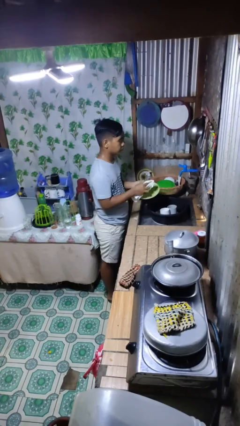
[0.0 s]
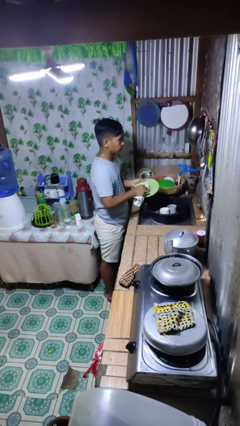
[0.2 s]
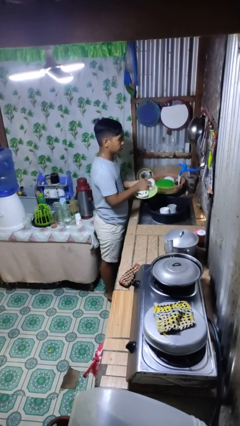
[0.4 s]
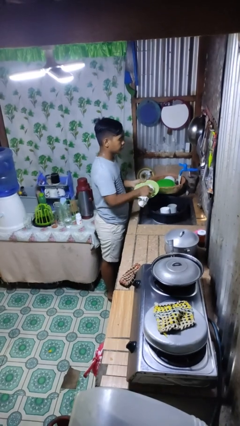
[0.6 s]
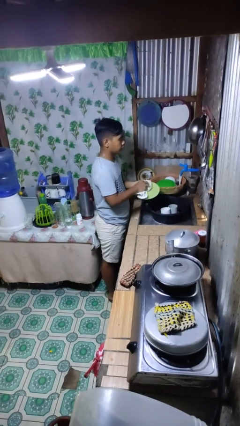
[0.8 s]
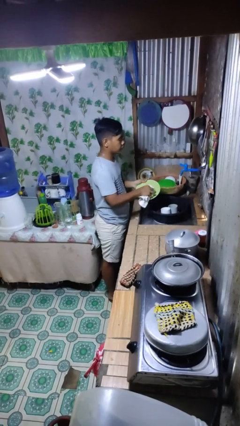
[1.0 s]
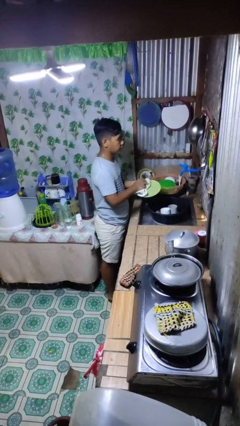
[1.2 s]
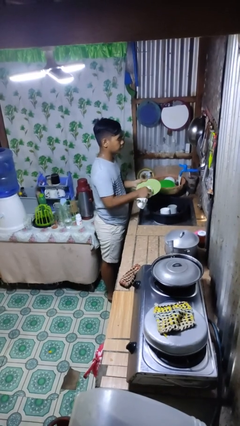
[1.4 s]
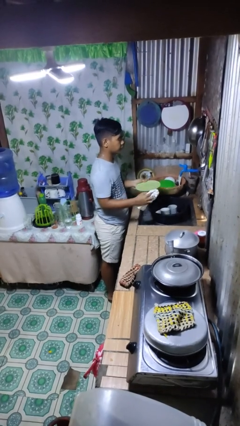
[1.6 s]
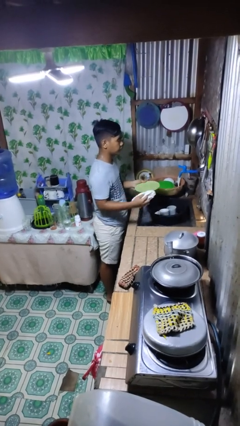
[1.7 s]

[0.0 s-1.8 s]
person dries dish

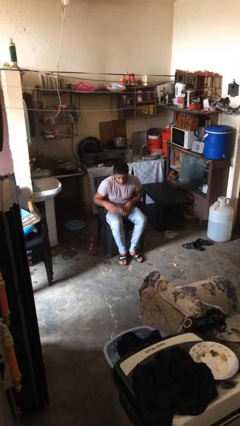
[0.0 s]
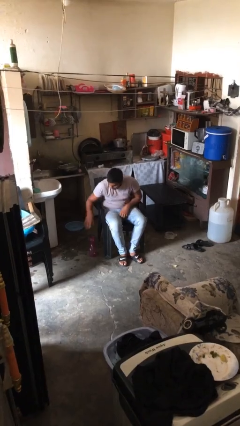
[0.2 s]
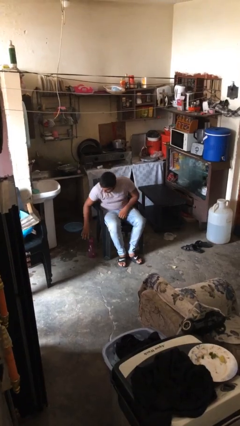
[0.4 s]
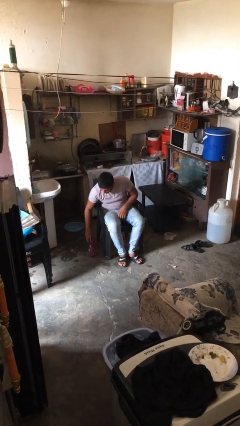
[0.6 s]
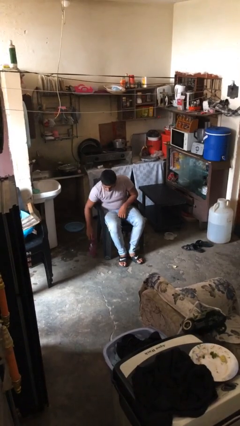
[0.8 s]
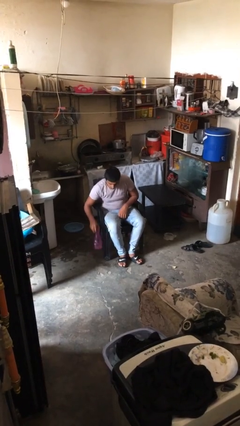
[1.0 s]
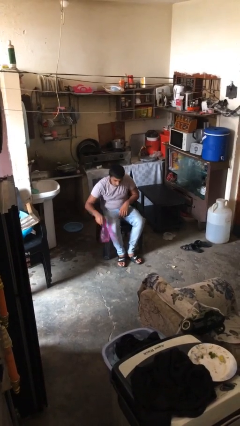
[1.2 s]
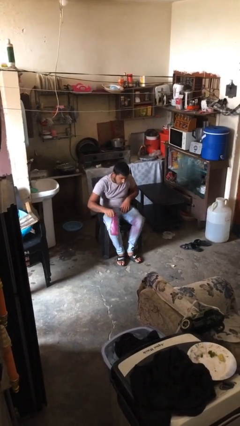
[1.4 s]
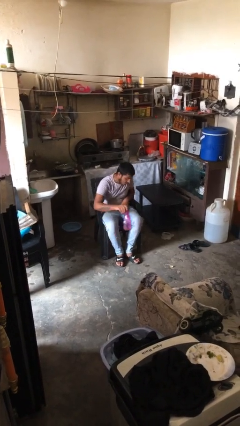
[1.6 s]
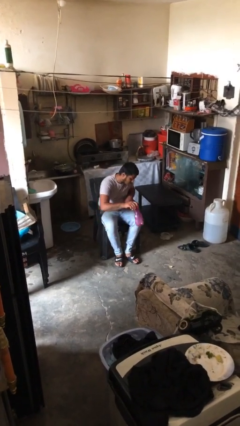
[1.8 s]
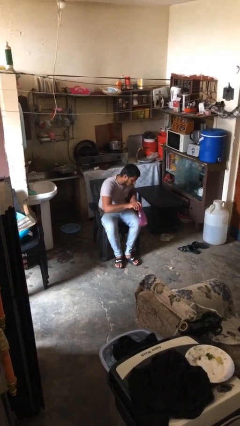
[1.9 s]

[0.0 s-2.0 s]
person picks up object from floor

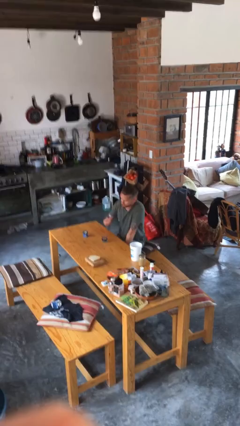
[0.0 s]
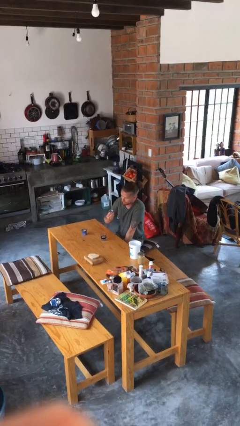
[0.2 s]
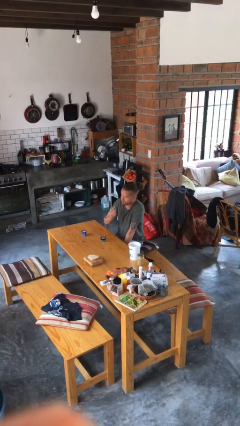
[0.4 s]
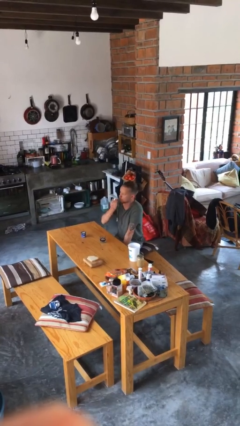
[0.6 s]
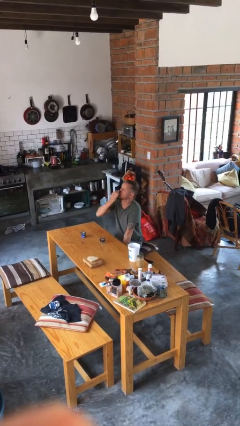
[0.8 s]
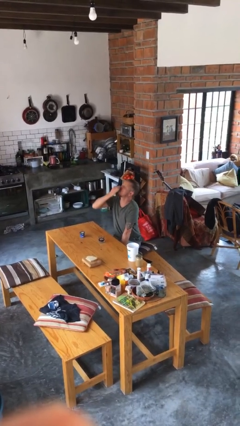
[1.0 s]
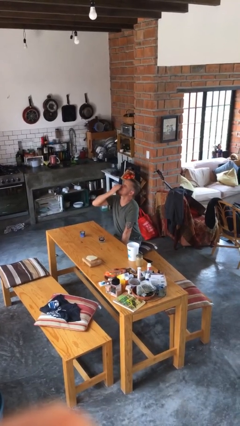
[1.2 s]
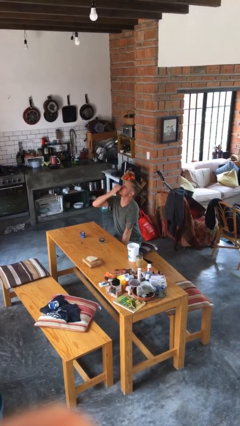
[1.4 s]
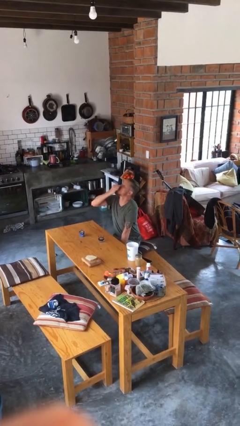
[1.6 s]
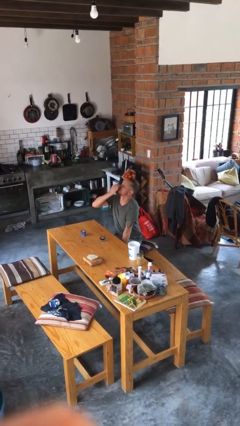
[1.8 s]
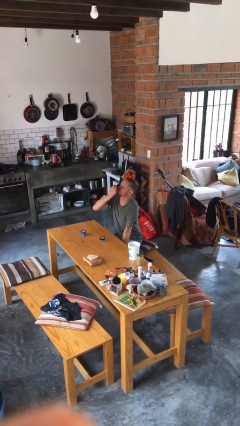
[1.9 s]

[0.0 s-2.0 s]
person drinks from shotglass

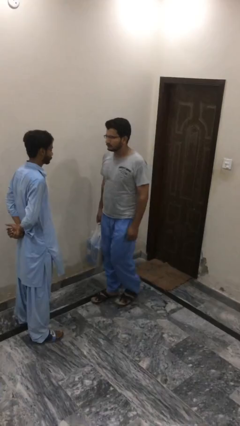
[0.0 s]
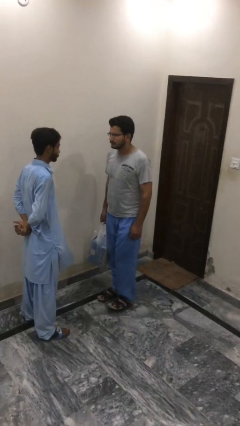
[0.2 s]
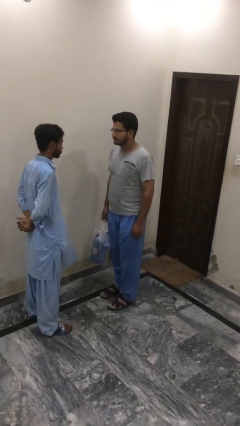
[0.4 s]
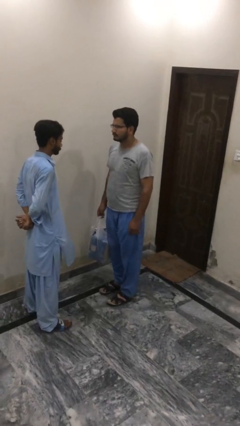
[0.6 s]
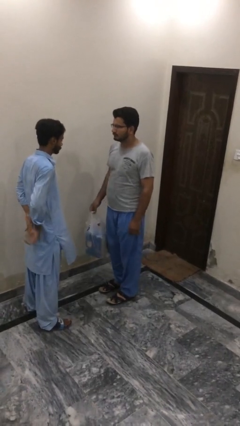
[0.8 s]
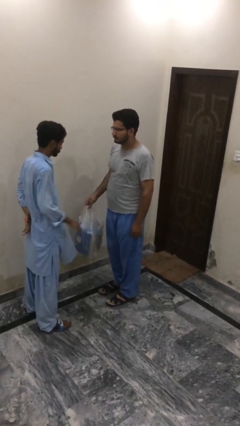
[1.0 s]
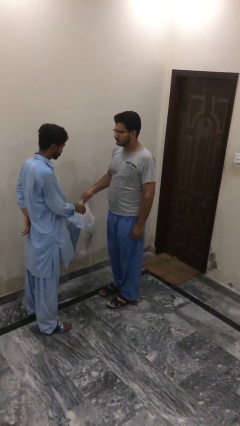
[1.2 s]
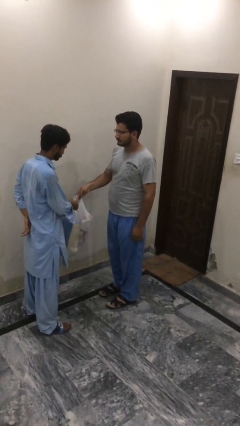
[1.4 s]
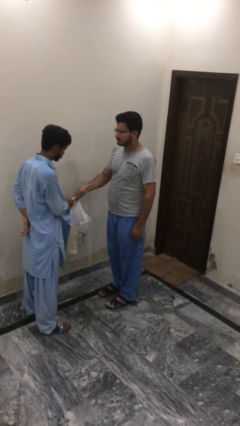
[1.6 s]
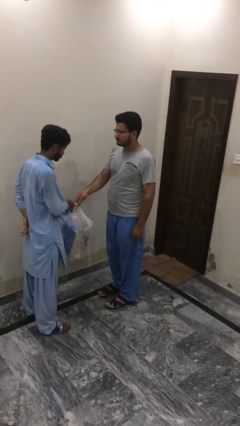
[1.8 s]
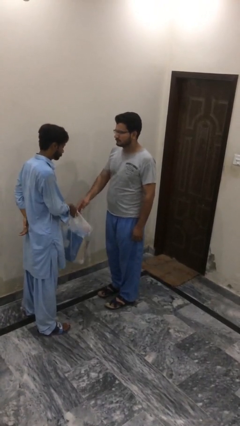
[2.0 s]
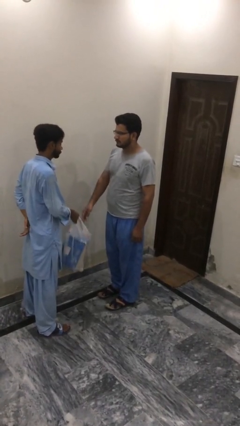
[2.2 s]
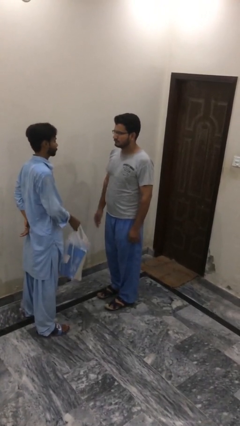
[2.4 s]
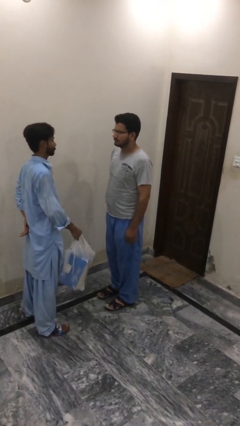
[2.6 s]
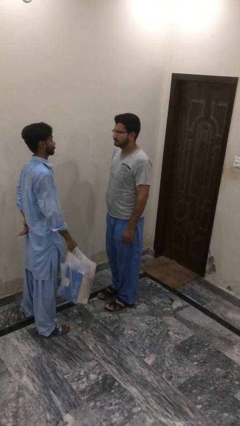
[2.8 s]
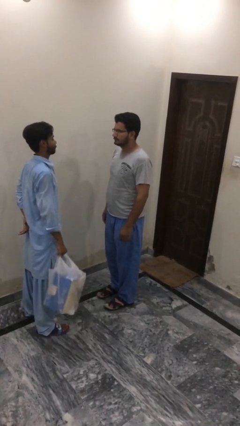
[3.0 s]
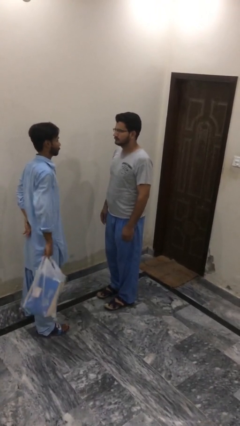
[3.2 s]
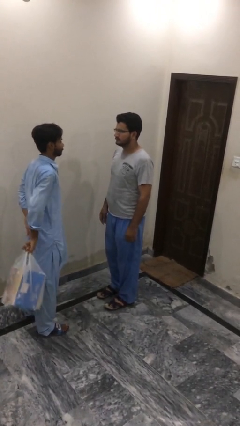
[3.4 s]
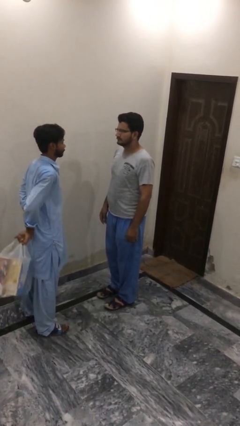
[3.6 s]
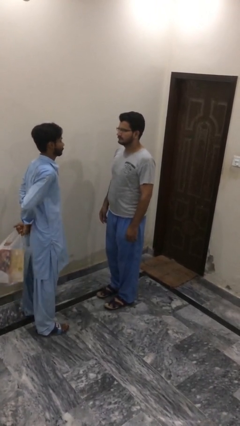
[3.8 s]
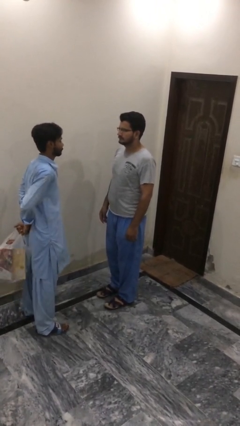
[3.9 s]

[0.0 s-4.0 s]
person transfers object to person

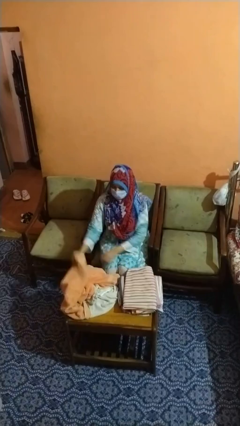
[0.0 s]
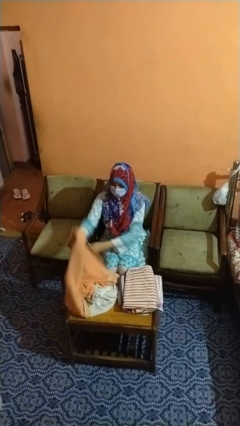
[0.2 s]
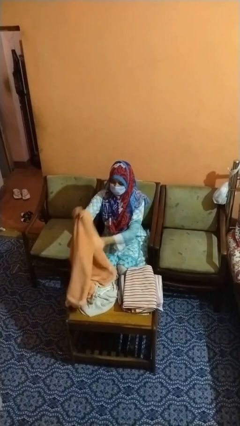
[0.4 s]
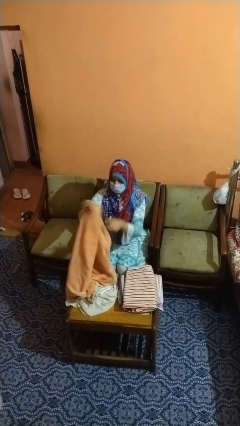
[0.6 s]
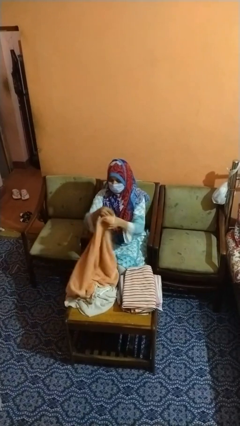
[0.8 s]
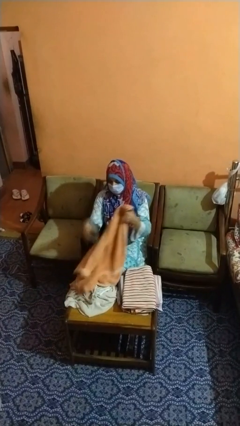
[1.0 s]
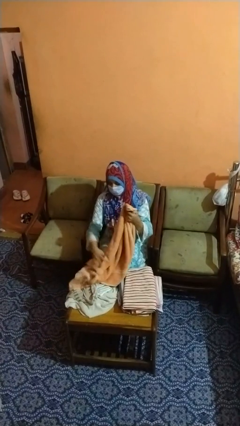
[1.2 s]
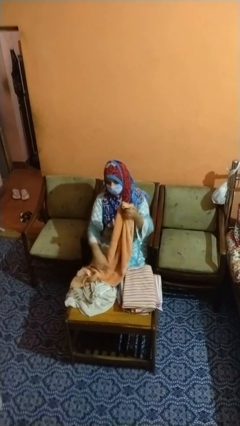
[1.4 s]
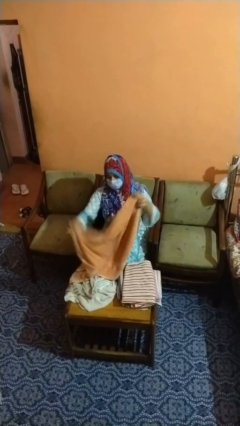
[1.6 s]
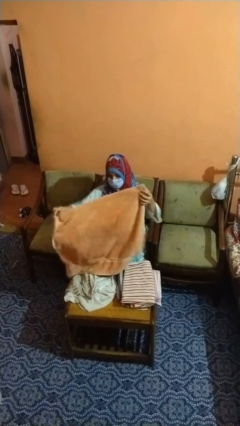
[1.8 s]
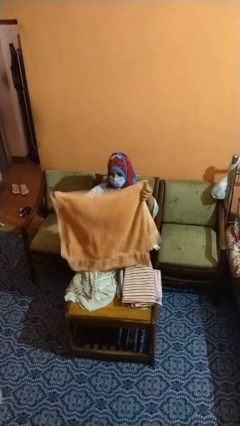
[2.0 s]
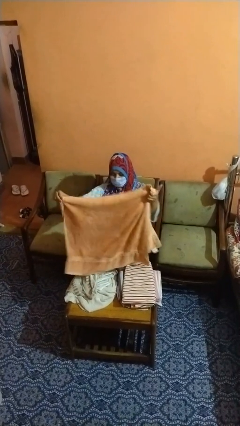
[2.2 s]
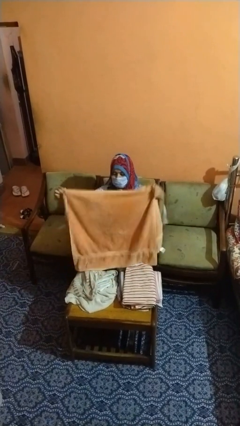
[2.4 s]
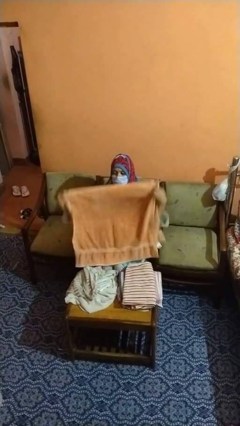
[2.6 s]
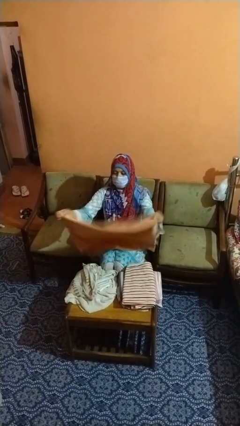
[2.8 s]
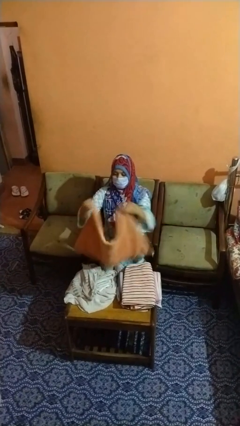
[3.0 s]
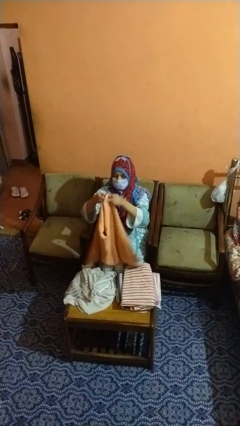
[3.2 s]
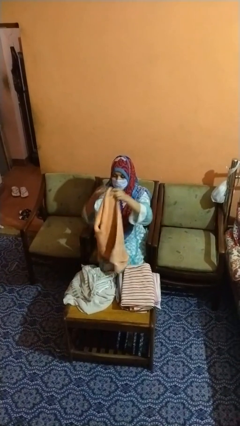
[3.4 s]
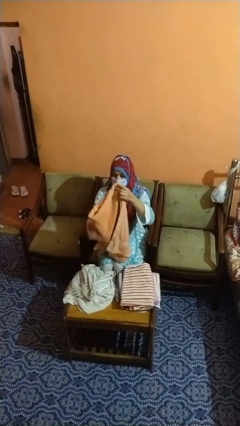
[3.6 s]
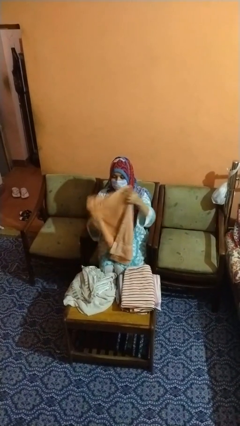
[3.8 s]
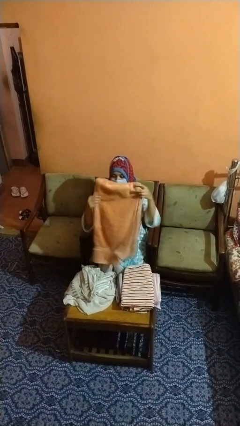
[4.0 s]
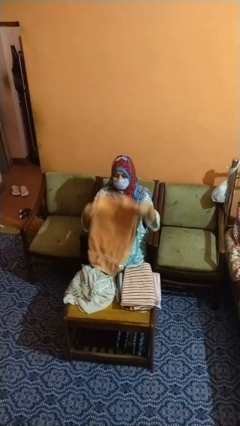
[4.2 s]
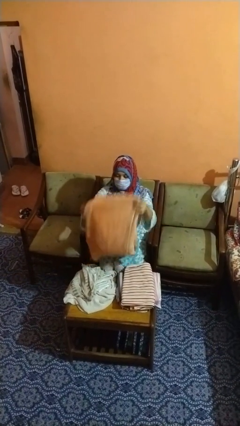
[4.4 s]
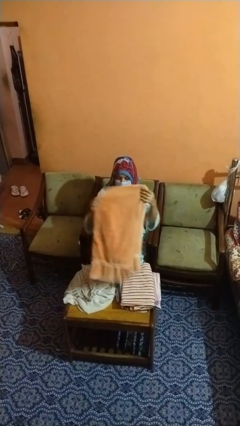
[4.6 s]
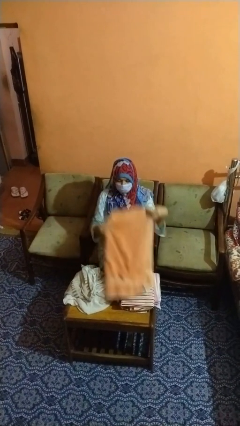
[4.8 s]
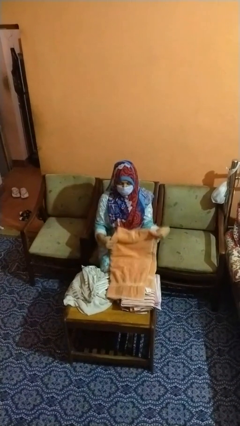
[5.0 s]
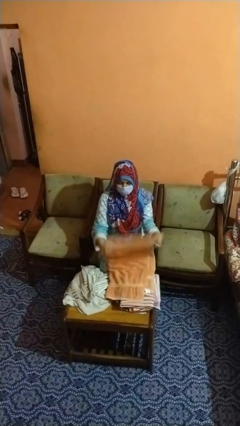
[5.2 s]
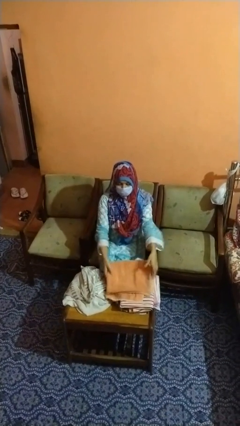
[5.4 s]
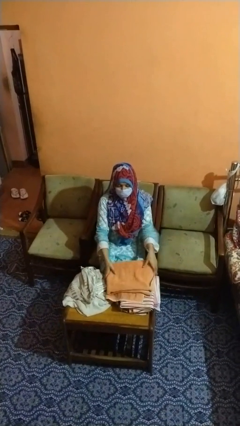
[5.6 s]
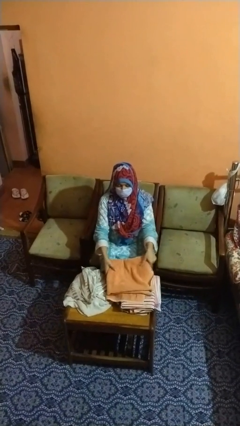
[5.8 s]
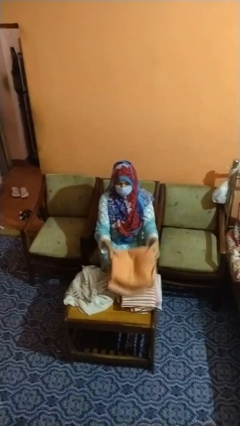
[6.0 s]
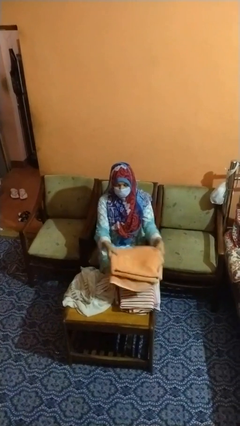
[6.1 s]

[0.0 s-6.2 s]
person folds towel

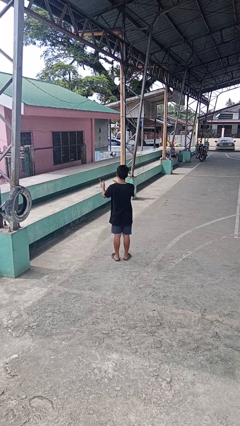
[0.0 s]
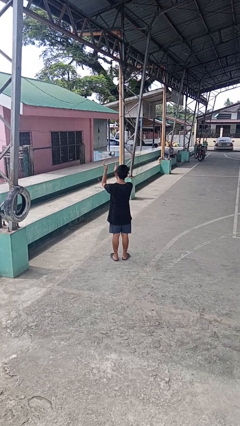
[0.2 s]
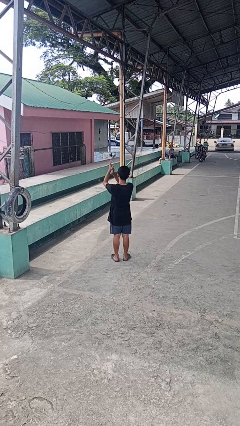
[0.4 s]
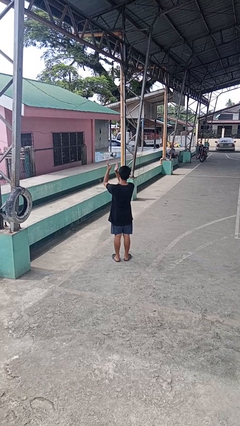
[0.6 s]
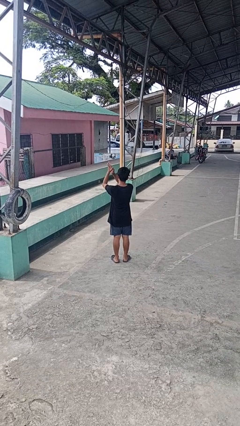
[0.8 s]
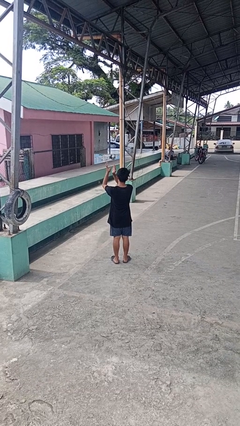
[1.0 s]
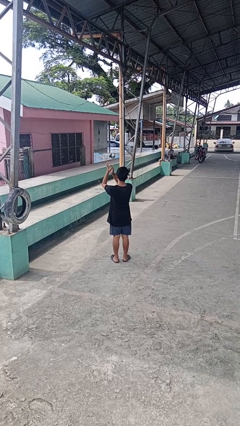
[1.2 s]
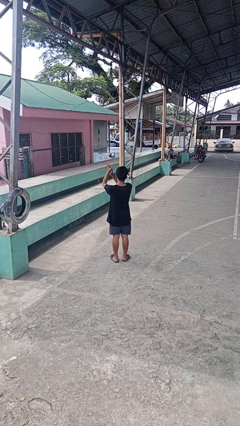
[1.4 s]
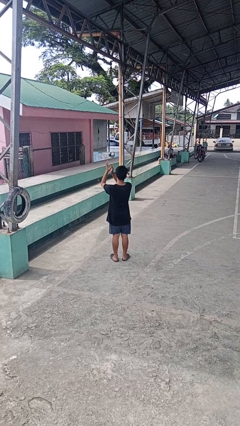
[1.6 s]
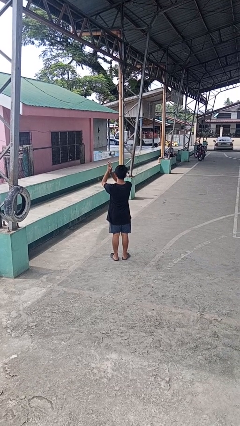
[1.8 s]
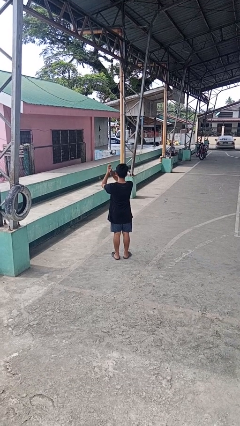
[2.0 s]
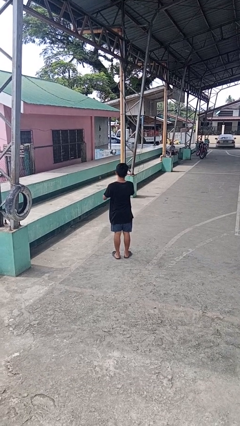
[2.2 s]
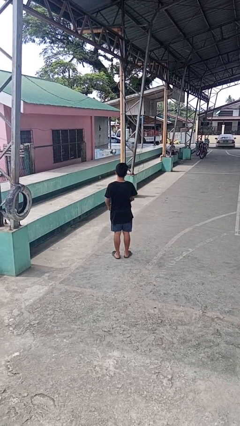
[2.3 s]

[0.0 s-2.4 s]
person claps hands
